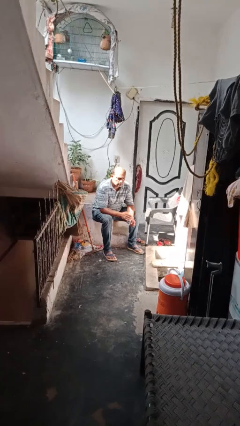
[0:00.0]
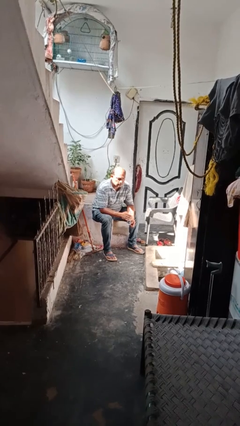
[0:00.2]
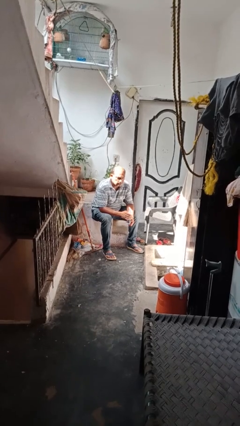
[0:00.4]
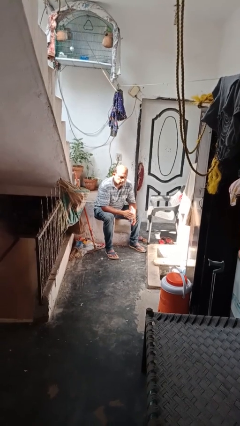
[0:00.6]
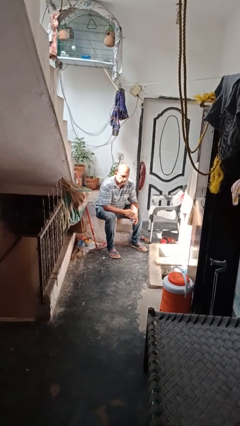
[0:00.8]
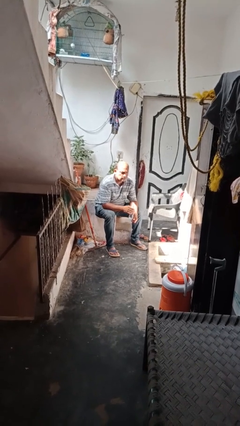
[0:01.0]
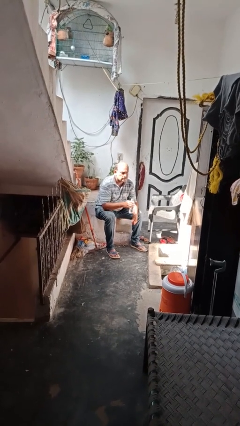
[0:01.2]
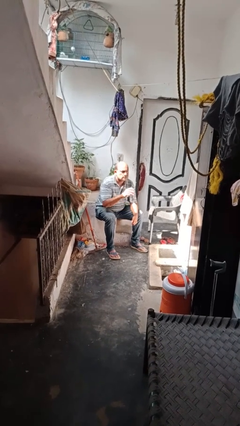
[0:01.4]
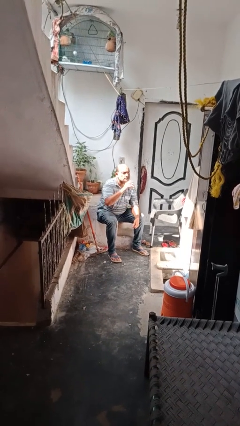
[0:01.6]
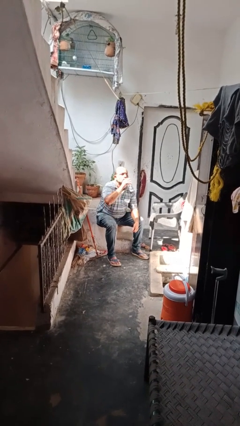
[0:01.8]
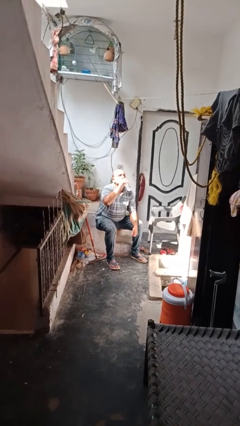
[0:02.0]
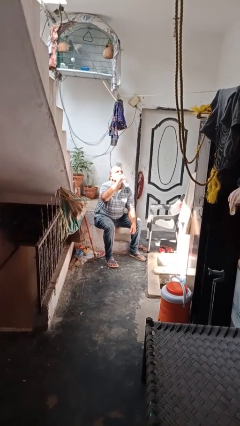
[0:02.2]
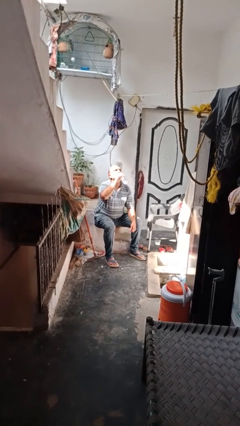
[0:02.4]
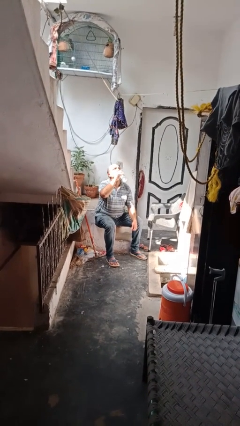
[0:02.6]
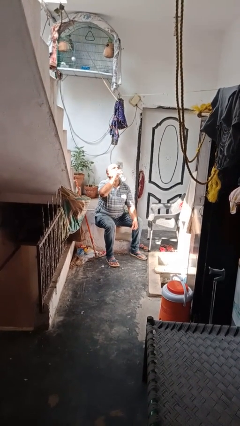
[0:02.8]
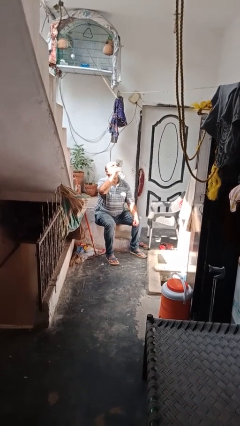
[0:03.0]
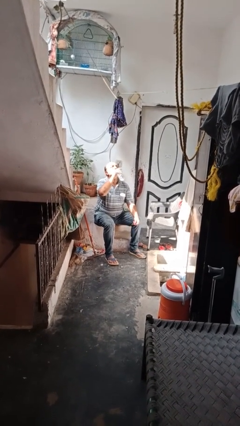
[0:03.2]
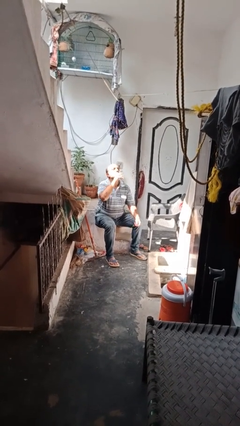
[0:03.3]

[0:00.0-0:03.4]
person drinks from bottle

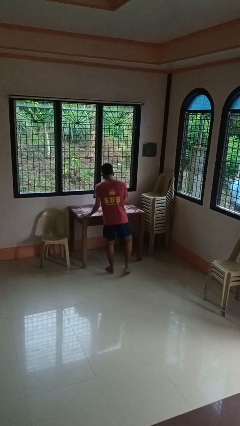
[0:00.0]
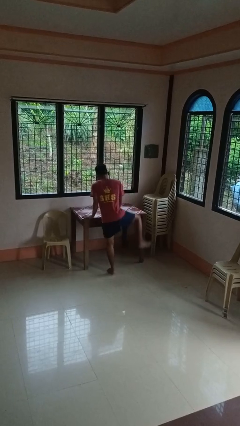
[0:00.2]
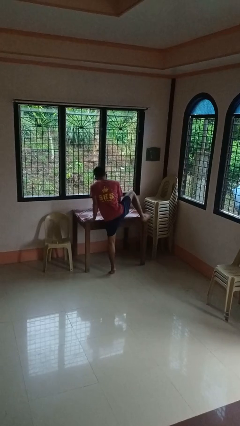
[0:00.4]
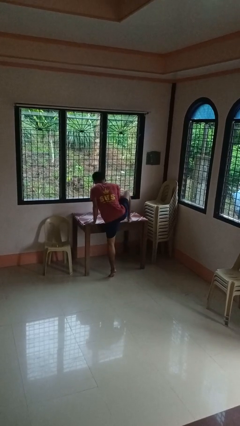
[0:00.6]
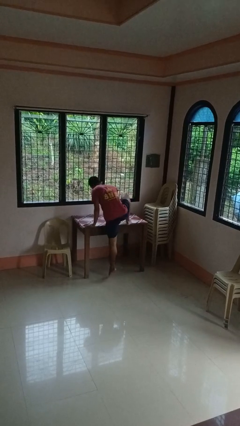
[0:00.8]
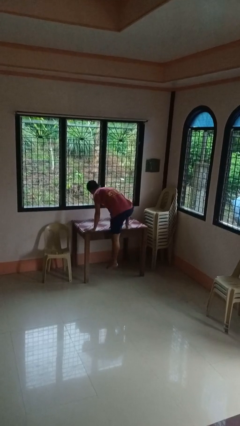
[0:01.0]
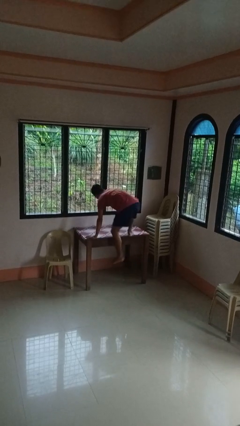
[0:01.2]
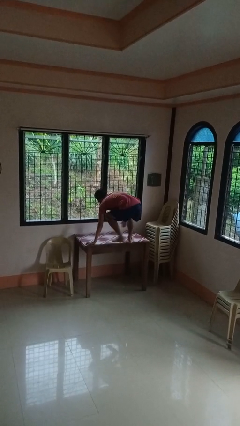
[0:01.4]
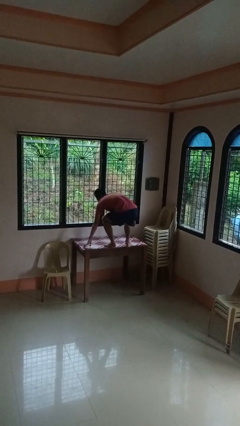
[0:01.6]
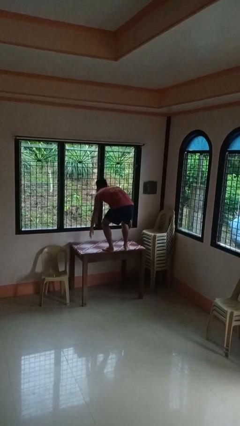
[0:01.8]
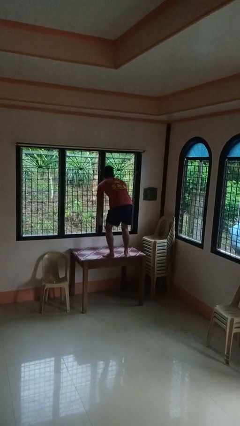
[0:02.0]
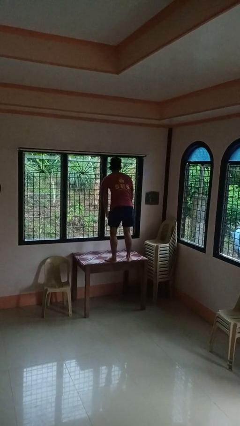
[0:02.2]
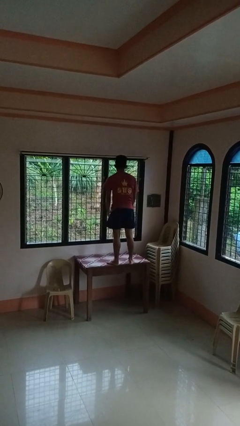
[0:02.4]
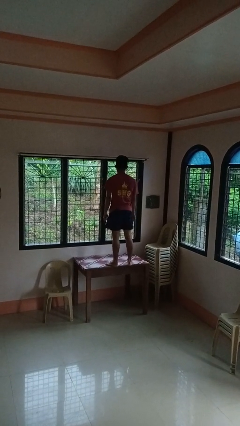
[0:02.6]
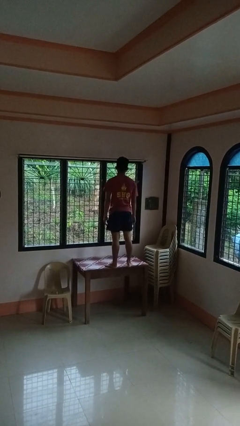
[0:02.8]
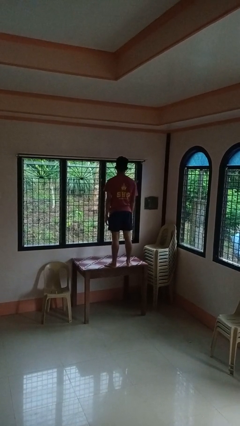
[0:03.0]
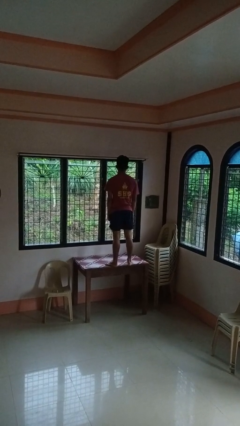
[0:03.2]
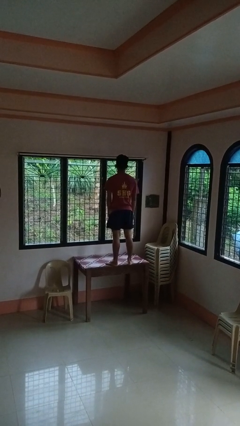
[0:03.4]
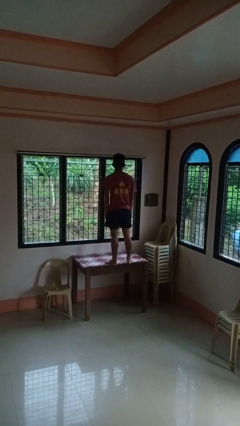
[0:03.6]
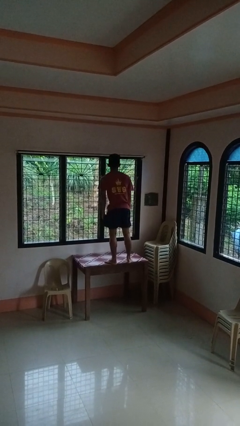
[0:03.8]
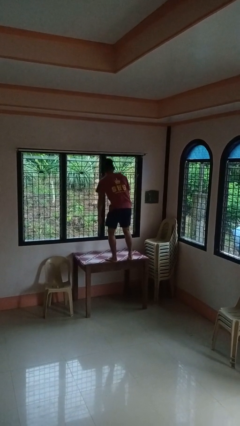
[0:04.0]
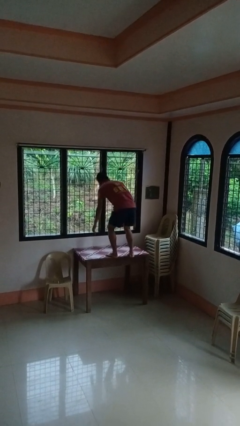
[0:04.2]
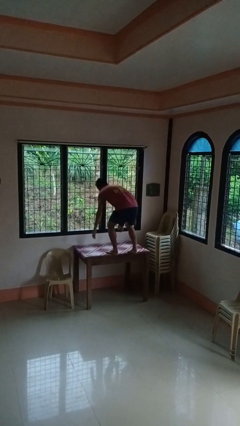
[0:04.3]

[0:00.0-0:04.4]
person climbs on table

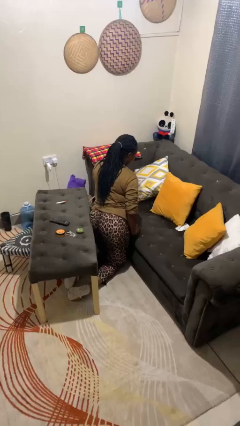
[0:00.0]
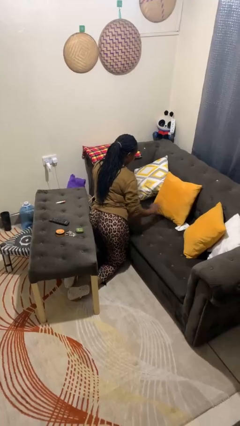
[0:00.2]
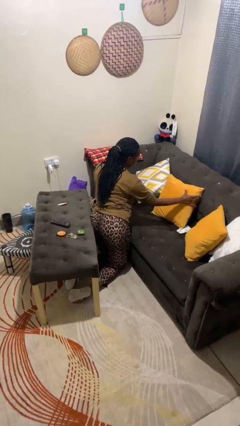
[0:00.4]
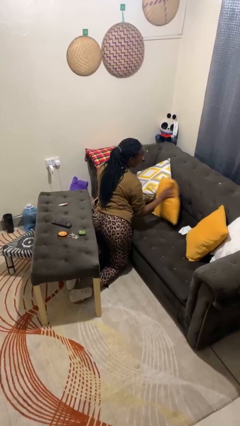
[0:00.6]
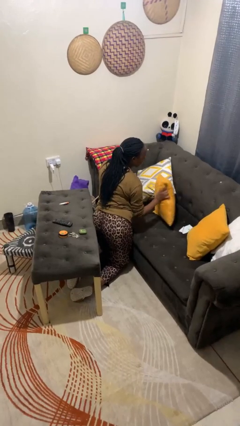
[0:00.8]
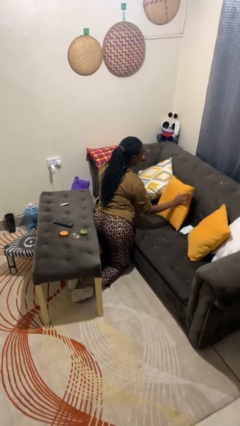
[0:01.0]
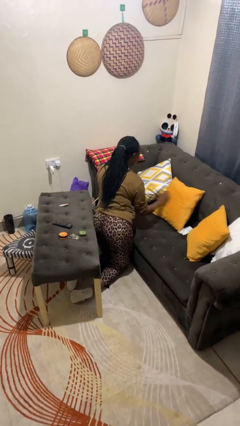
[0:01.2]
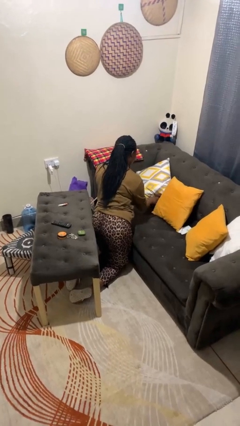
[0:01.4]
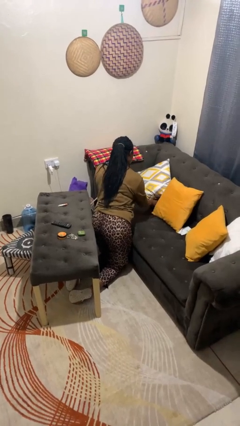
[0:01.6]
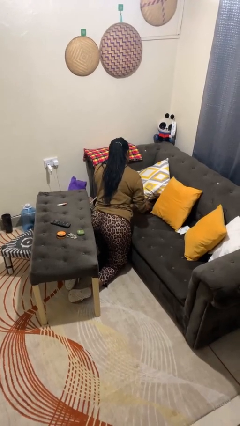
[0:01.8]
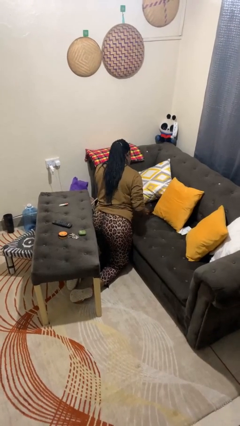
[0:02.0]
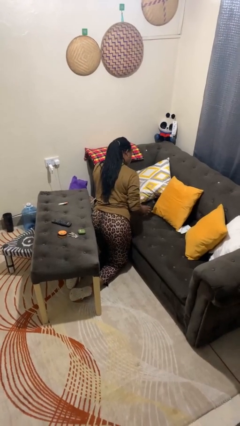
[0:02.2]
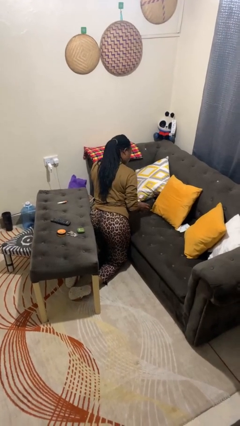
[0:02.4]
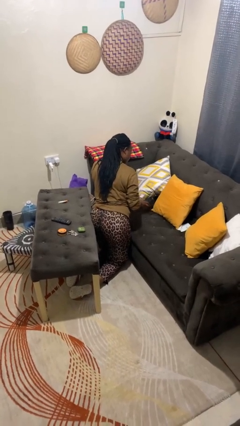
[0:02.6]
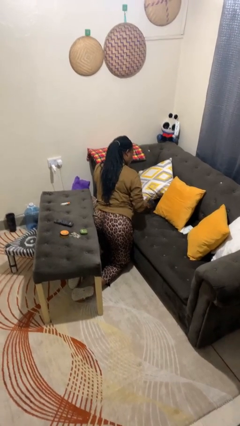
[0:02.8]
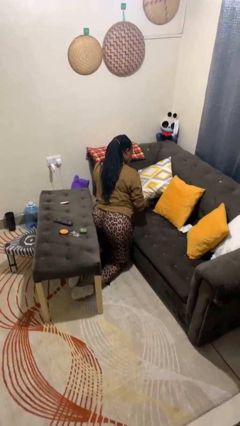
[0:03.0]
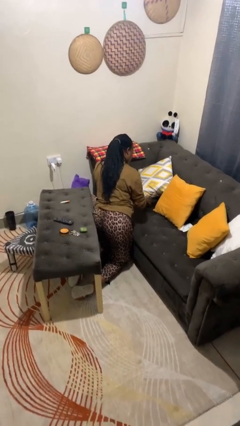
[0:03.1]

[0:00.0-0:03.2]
person searches in couch

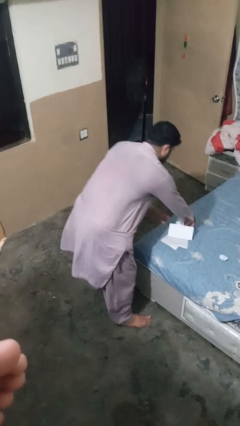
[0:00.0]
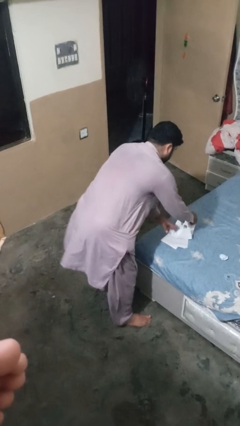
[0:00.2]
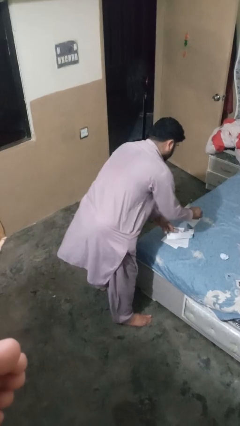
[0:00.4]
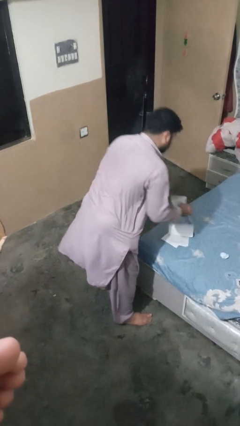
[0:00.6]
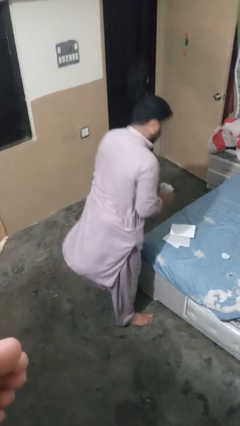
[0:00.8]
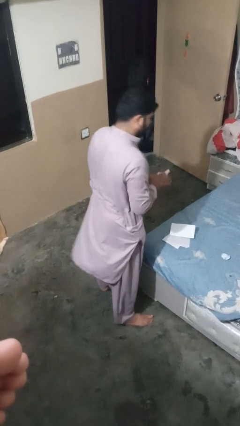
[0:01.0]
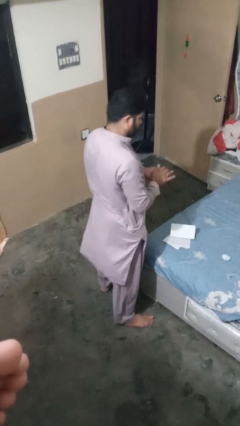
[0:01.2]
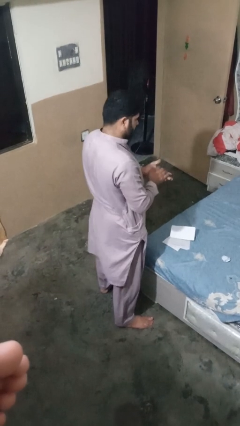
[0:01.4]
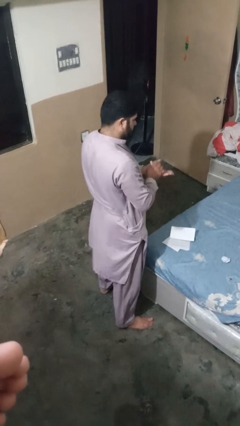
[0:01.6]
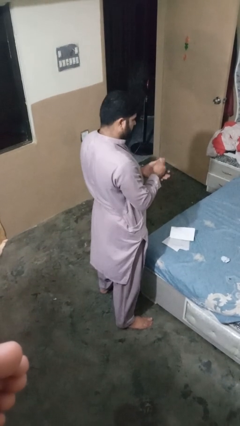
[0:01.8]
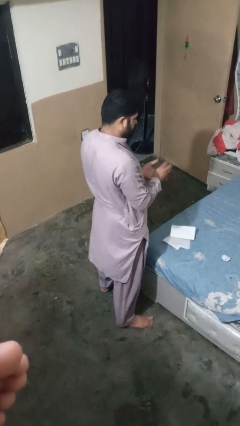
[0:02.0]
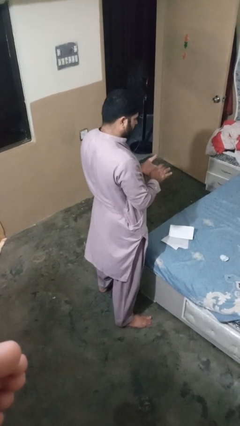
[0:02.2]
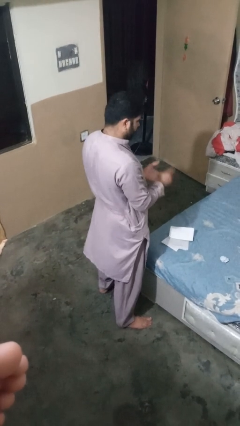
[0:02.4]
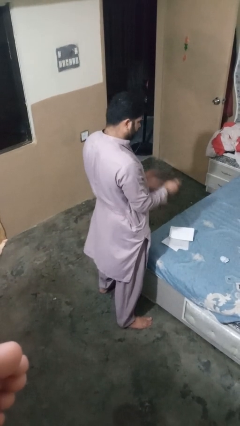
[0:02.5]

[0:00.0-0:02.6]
person crumples paper

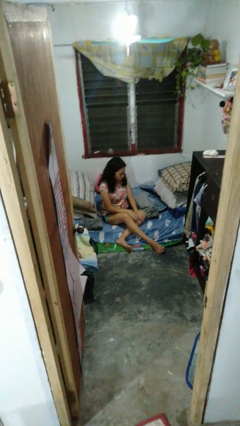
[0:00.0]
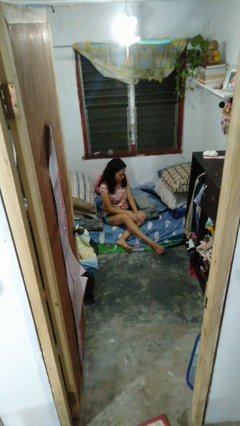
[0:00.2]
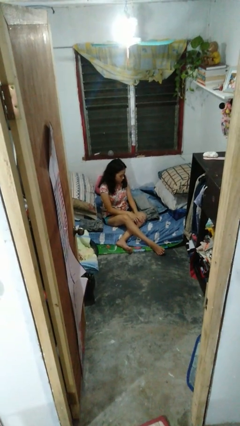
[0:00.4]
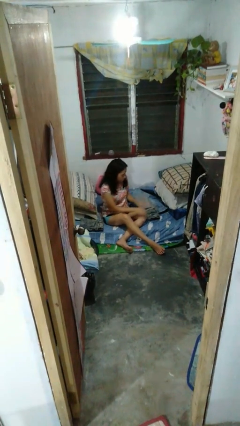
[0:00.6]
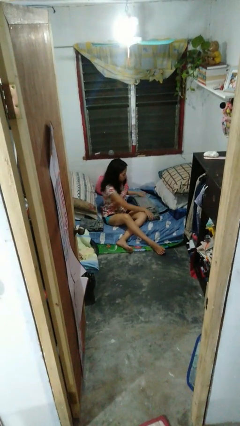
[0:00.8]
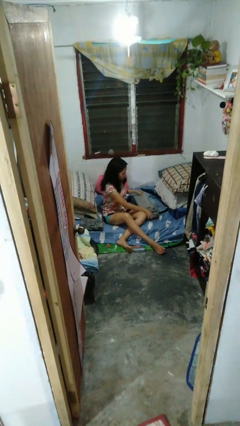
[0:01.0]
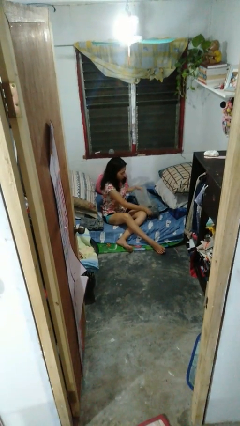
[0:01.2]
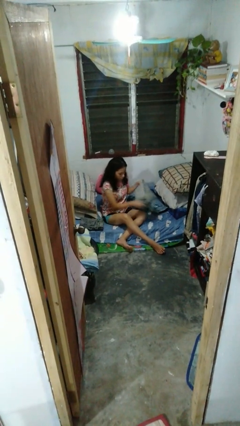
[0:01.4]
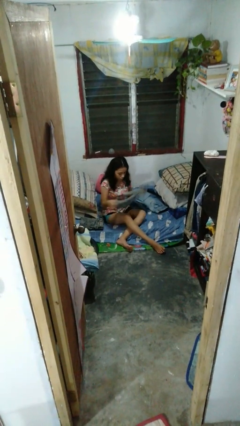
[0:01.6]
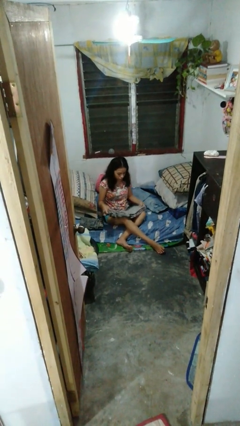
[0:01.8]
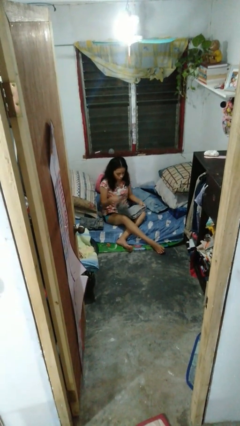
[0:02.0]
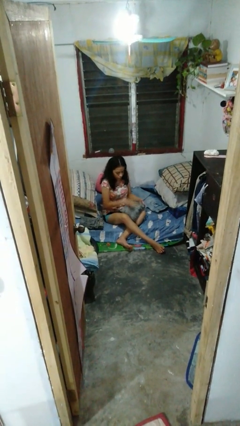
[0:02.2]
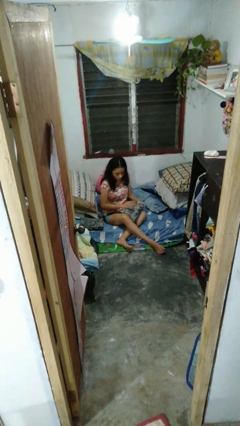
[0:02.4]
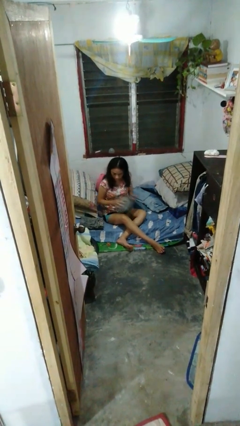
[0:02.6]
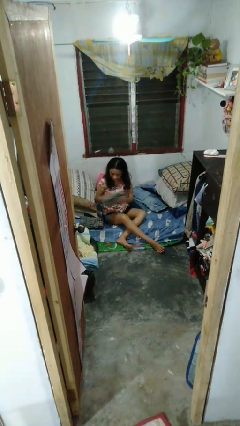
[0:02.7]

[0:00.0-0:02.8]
person folds pants

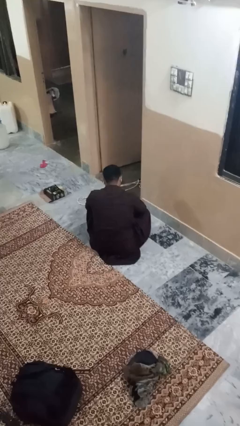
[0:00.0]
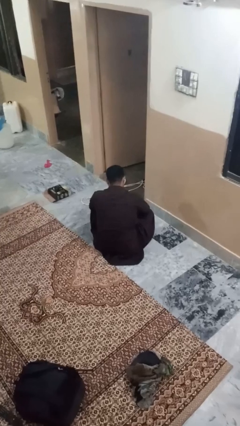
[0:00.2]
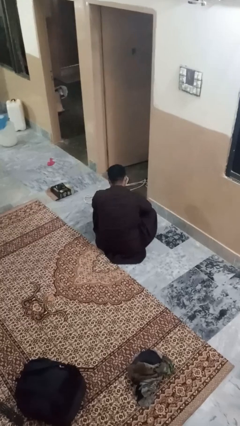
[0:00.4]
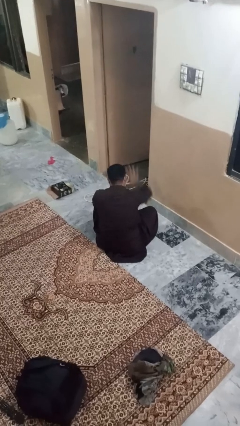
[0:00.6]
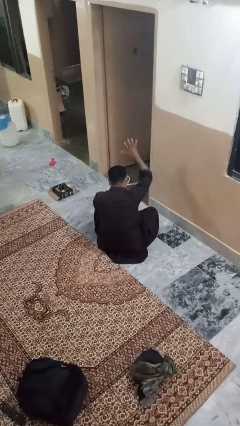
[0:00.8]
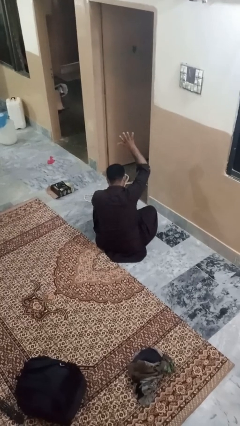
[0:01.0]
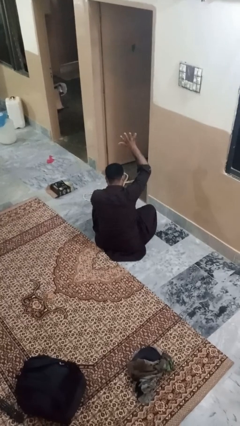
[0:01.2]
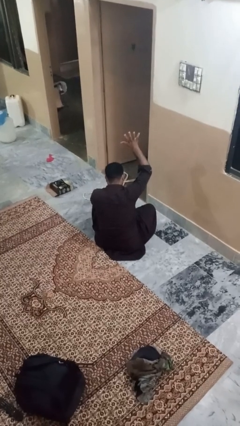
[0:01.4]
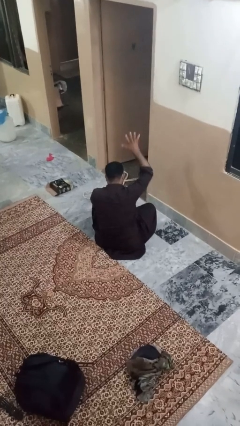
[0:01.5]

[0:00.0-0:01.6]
person gestures number five
